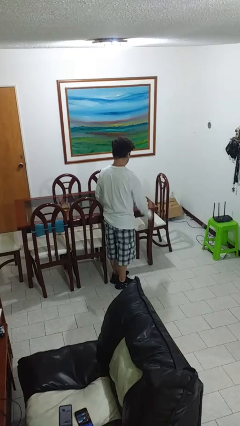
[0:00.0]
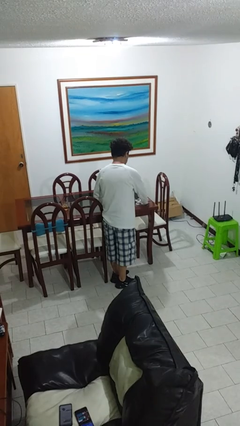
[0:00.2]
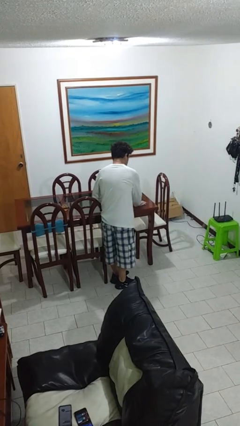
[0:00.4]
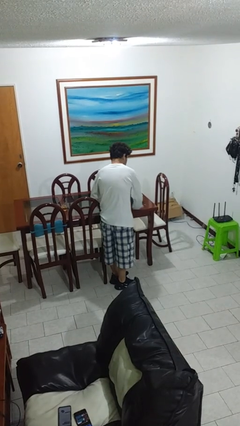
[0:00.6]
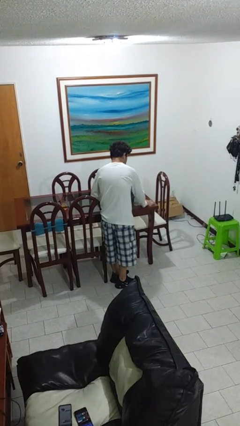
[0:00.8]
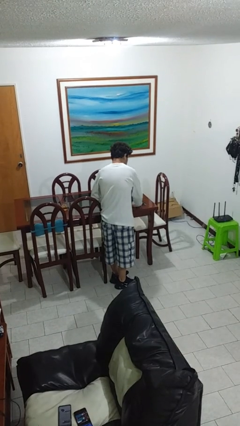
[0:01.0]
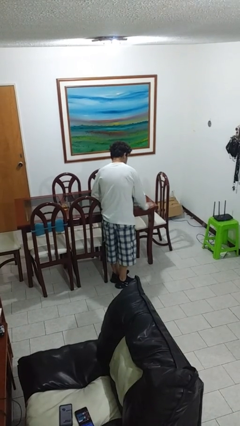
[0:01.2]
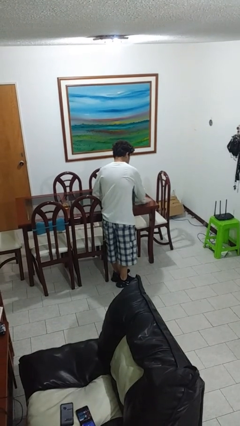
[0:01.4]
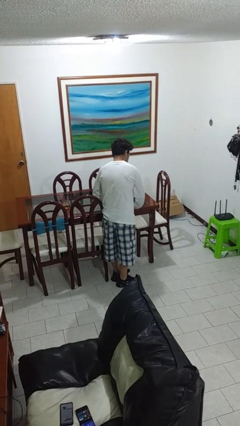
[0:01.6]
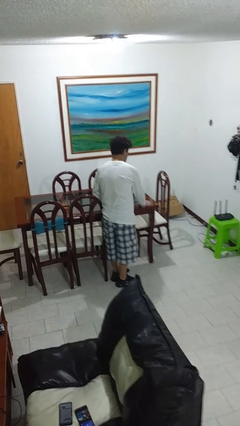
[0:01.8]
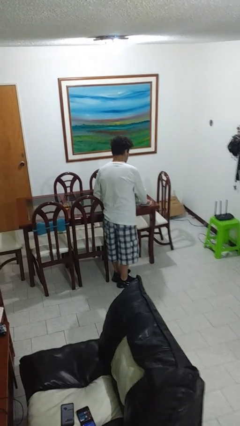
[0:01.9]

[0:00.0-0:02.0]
person cleans table with rag

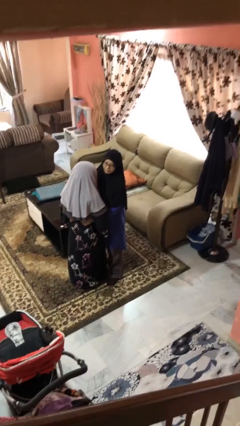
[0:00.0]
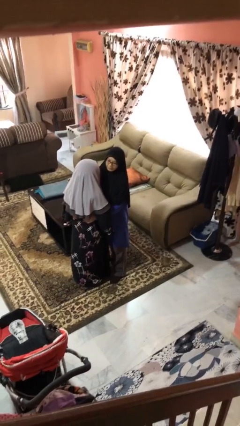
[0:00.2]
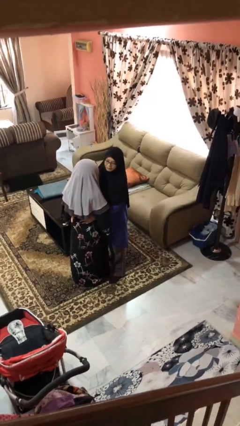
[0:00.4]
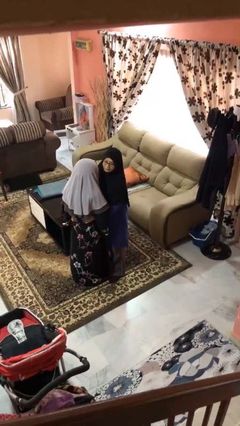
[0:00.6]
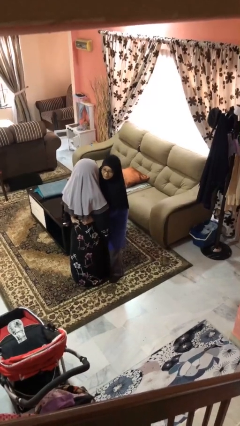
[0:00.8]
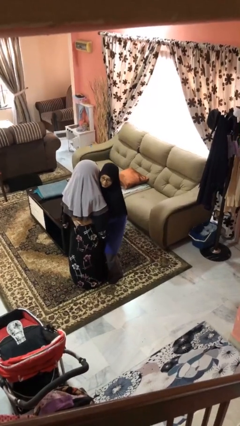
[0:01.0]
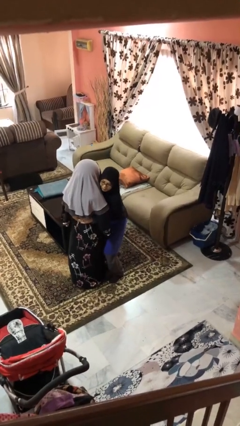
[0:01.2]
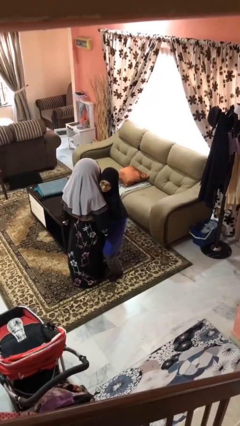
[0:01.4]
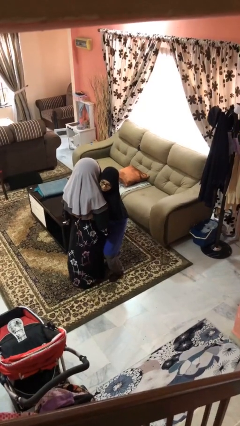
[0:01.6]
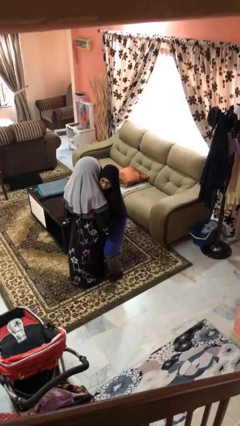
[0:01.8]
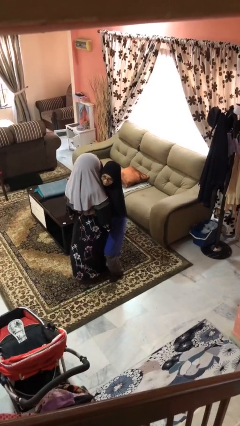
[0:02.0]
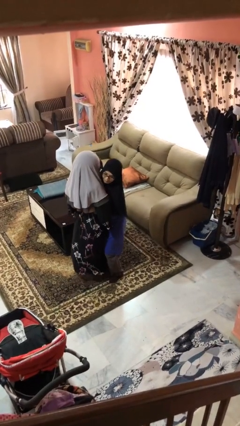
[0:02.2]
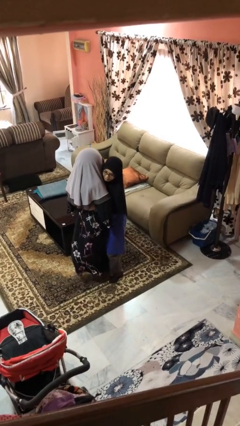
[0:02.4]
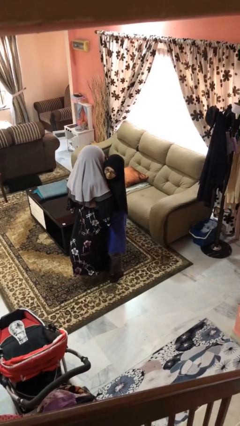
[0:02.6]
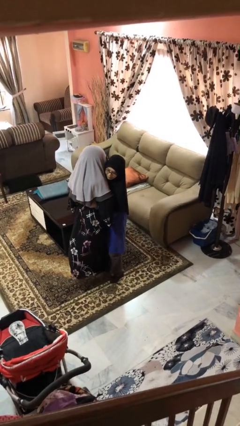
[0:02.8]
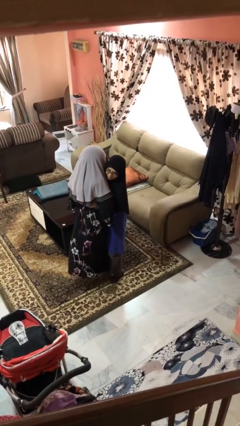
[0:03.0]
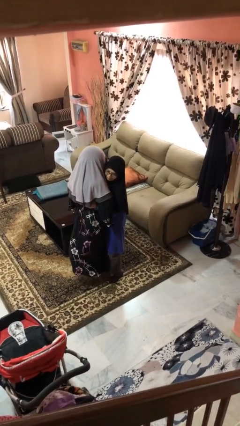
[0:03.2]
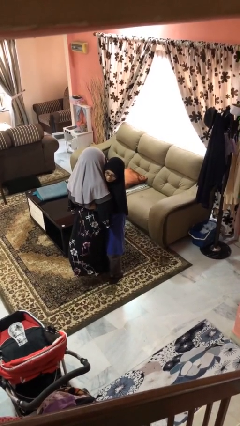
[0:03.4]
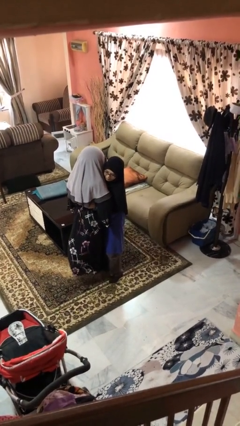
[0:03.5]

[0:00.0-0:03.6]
person picks up person

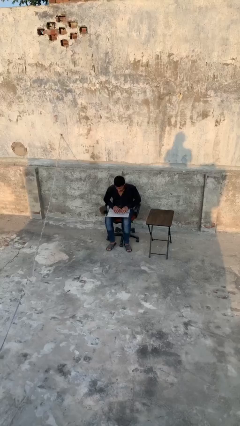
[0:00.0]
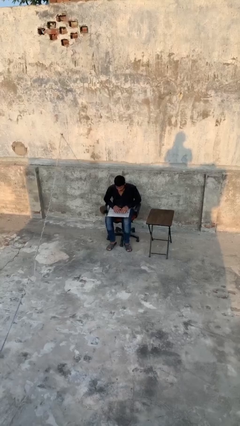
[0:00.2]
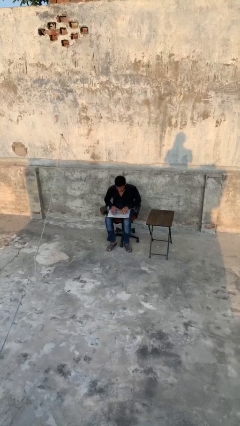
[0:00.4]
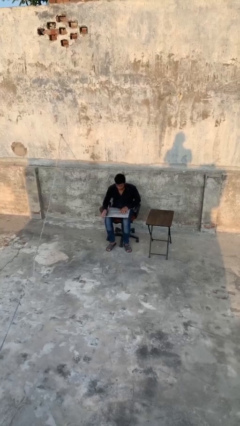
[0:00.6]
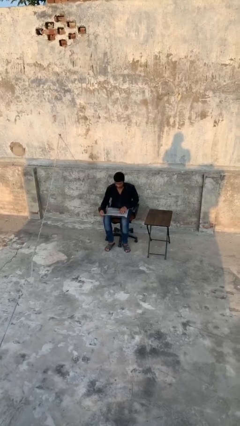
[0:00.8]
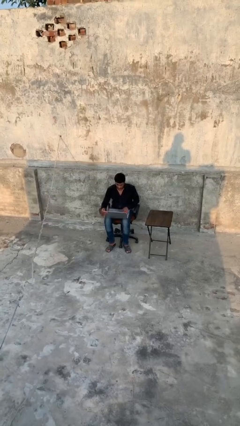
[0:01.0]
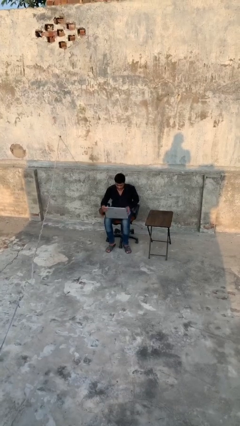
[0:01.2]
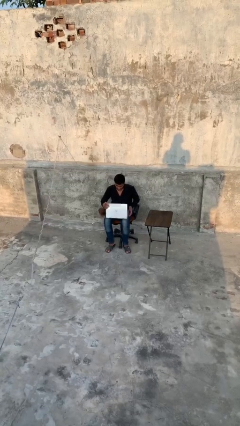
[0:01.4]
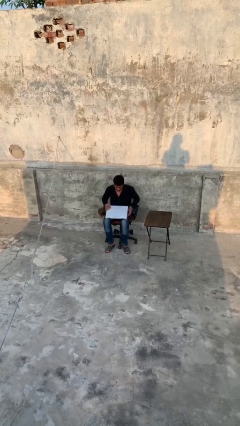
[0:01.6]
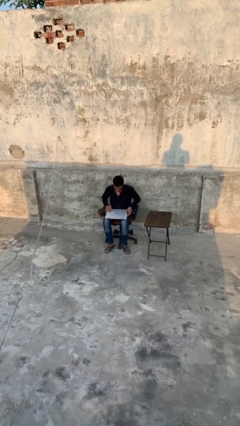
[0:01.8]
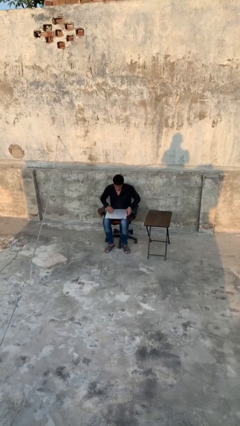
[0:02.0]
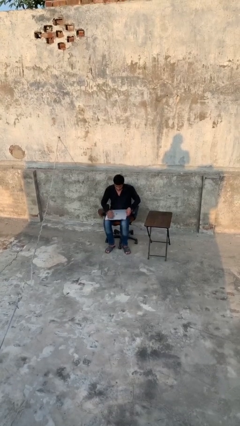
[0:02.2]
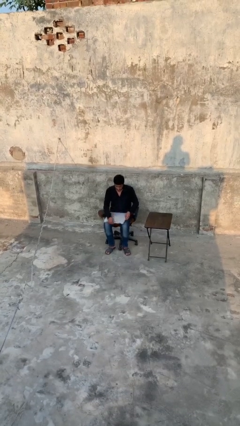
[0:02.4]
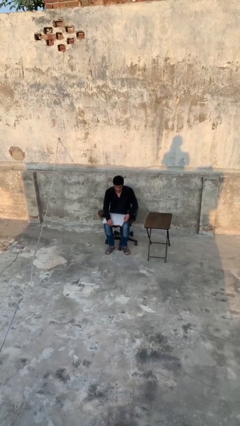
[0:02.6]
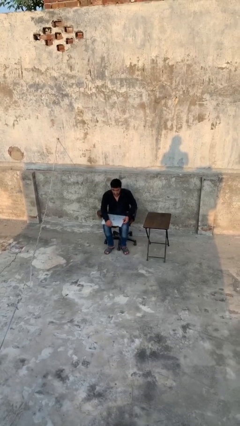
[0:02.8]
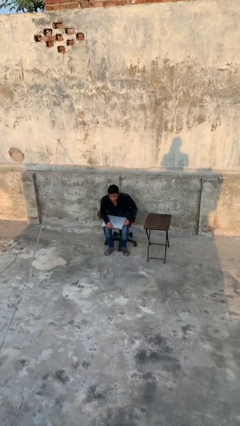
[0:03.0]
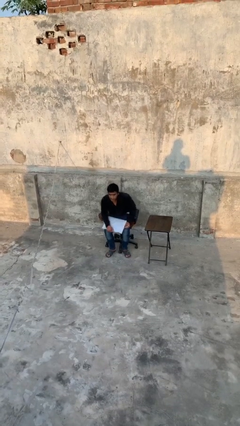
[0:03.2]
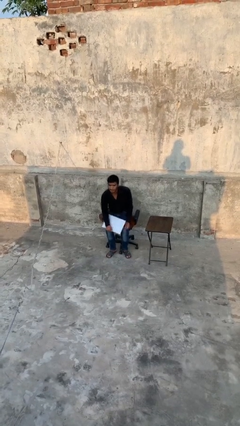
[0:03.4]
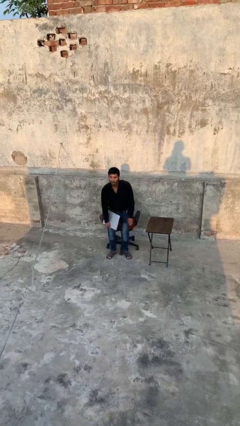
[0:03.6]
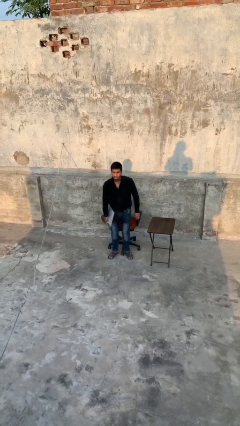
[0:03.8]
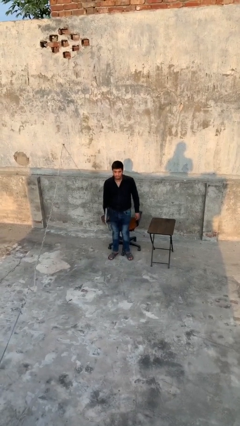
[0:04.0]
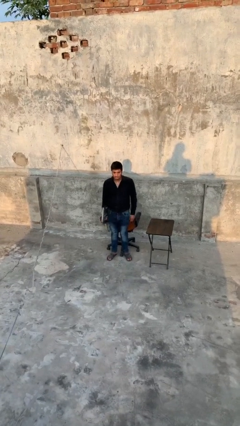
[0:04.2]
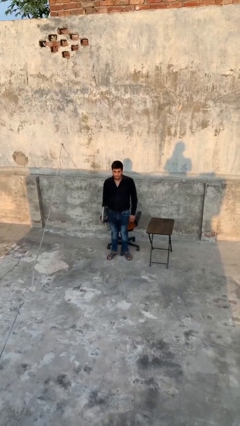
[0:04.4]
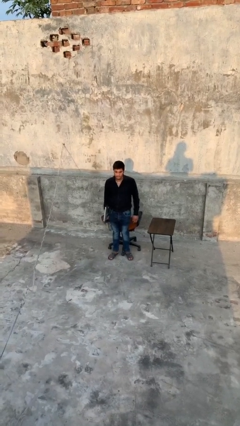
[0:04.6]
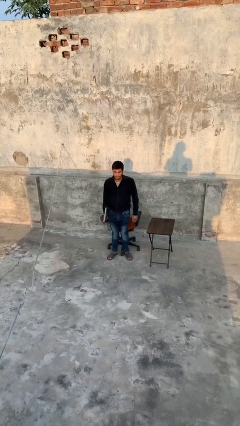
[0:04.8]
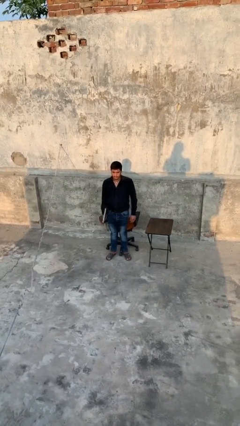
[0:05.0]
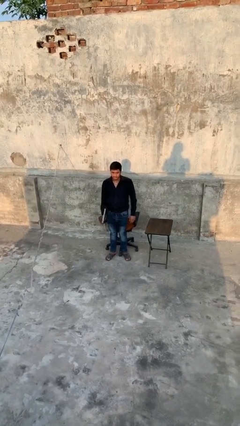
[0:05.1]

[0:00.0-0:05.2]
person stands up

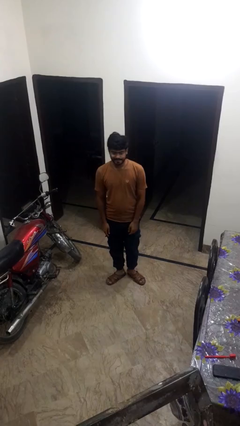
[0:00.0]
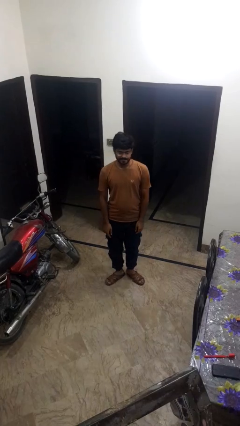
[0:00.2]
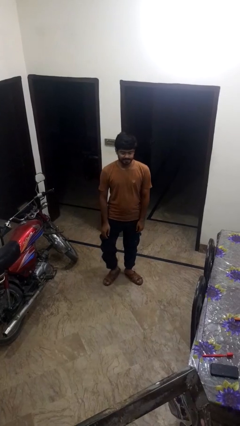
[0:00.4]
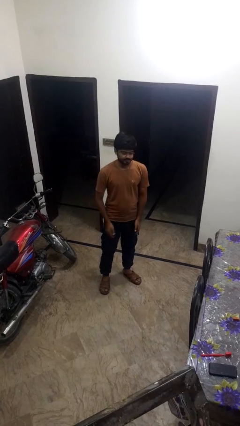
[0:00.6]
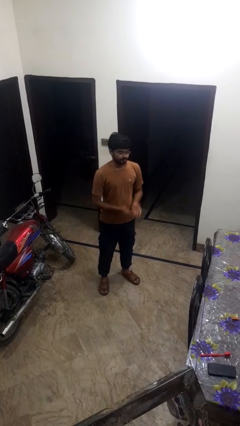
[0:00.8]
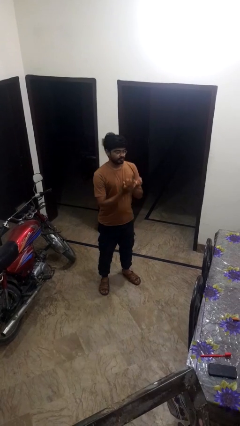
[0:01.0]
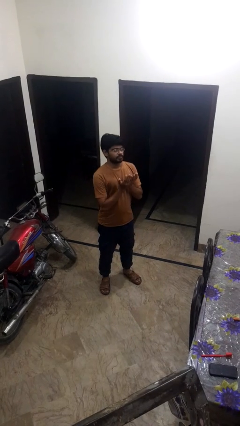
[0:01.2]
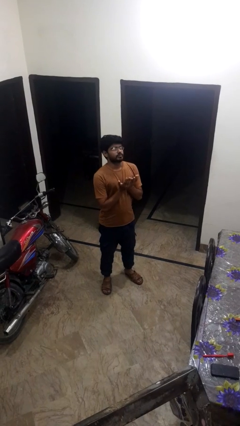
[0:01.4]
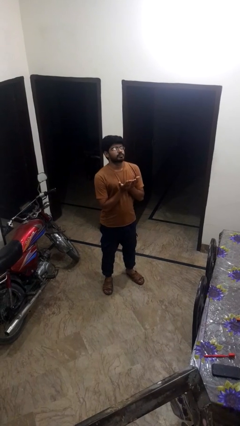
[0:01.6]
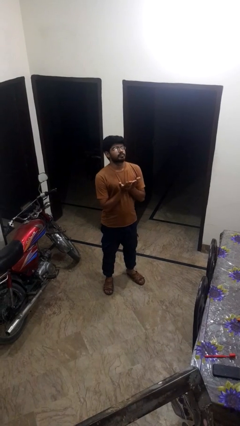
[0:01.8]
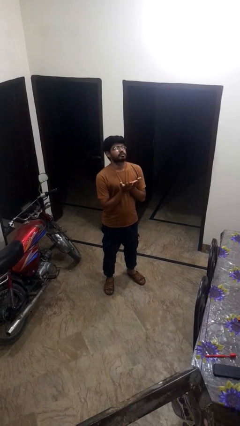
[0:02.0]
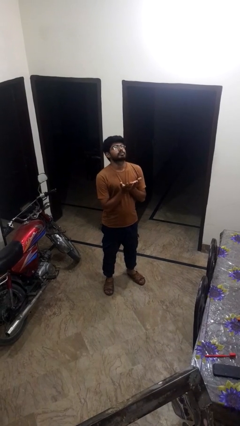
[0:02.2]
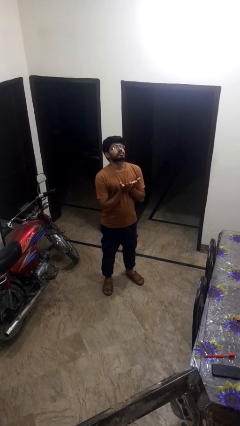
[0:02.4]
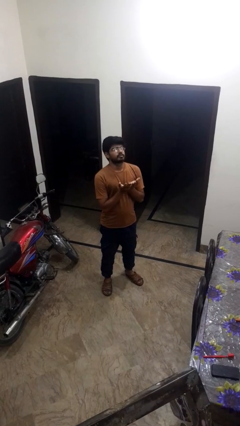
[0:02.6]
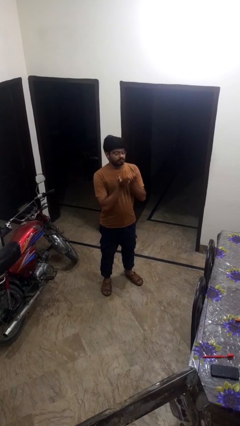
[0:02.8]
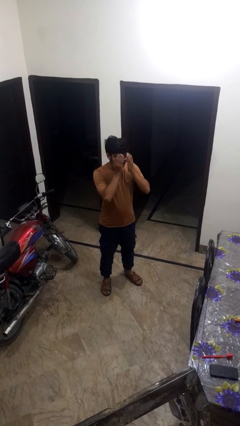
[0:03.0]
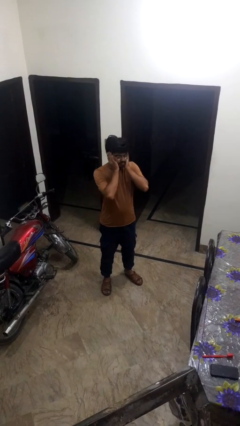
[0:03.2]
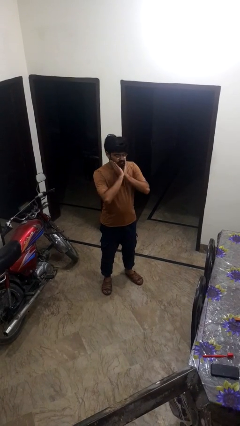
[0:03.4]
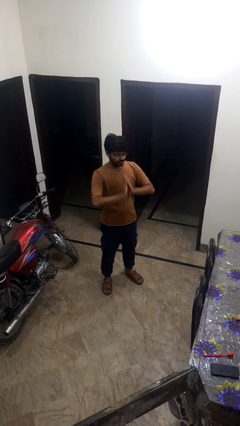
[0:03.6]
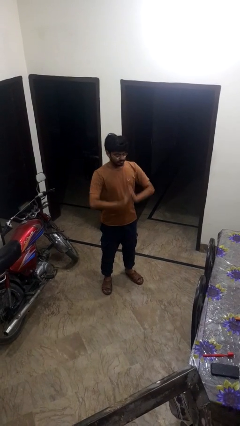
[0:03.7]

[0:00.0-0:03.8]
person prays

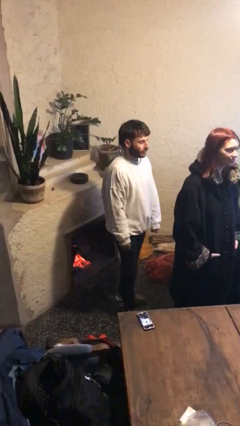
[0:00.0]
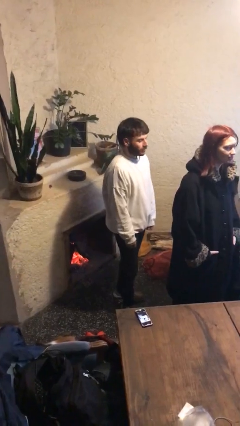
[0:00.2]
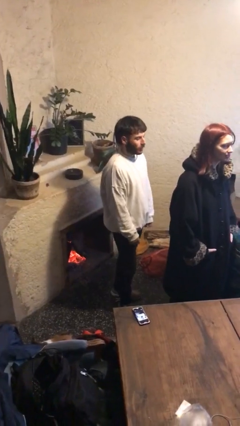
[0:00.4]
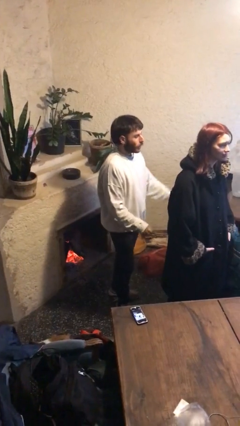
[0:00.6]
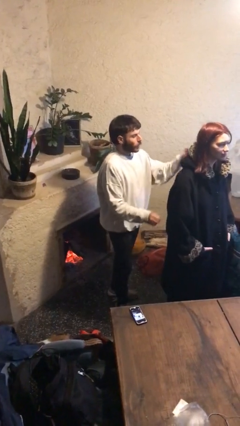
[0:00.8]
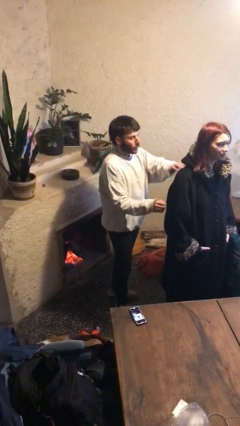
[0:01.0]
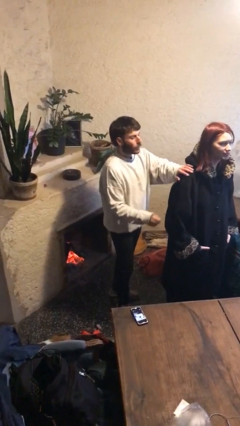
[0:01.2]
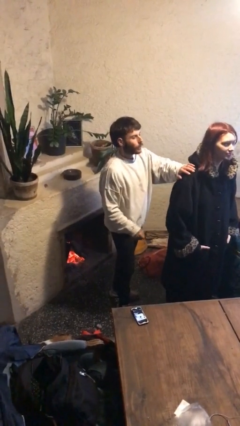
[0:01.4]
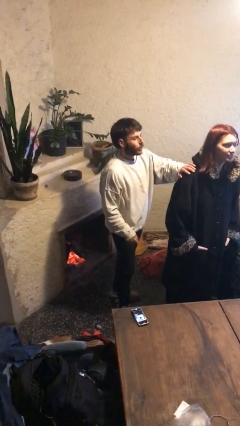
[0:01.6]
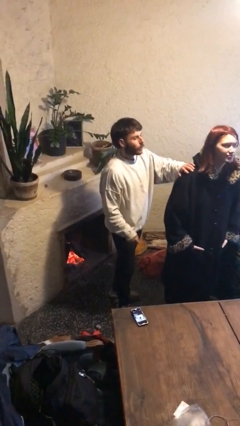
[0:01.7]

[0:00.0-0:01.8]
person grabs person by shoulder

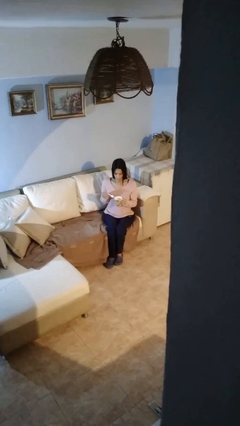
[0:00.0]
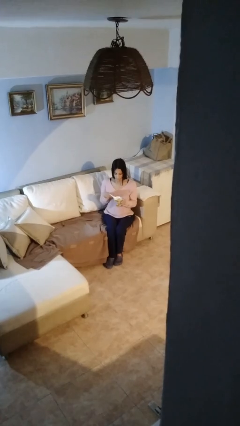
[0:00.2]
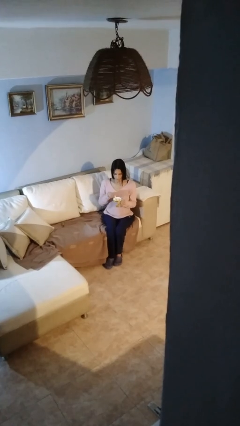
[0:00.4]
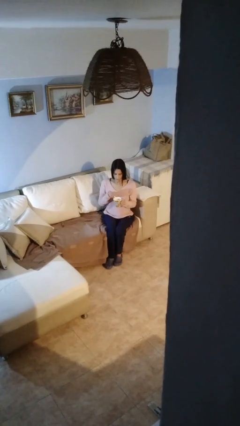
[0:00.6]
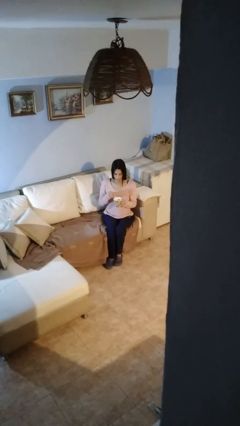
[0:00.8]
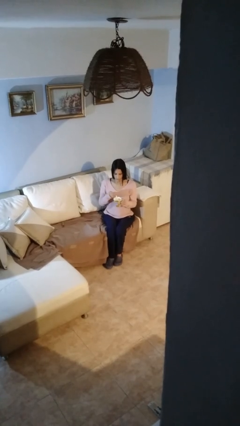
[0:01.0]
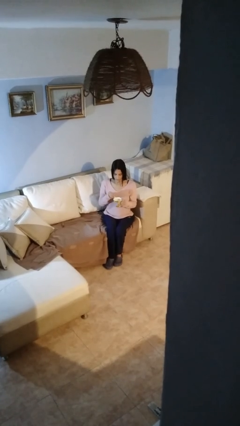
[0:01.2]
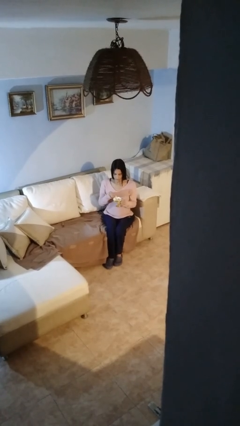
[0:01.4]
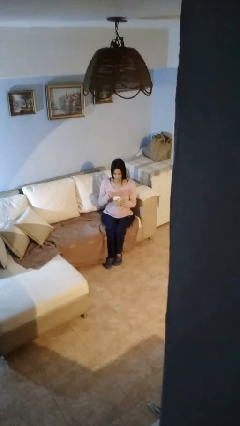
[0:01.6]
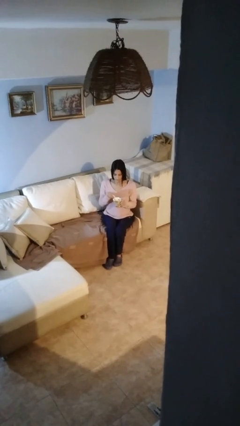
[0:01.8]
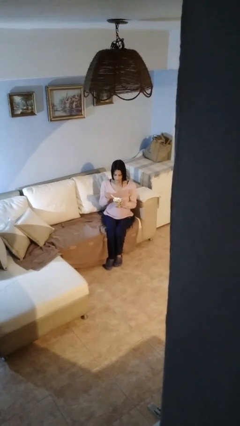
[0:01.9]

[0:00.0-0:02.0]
person stirs mug
